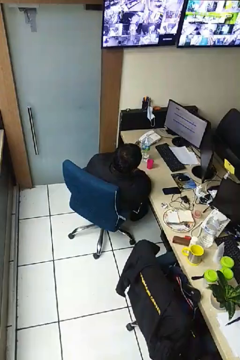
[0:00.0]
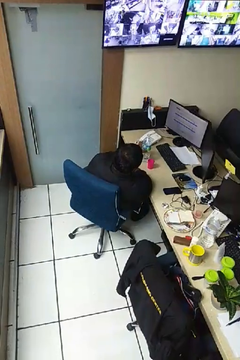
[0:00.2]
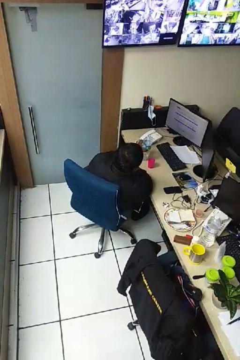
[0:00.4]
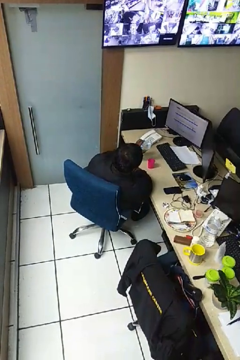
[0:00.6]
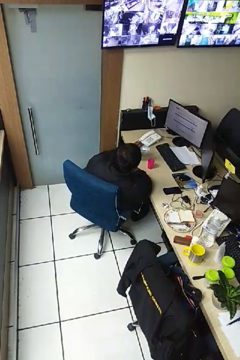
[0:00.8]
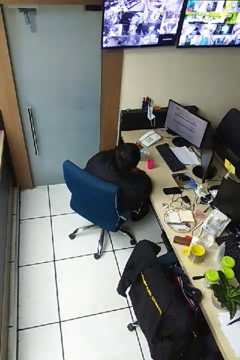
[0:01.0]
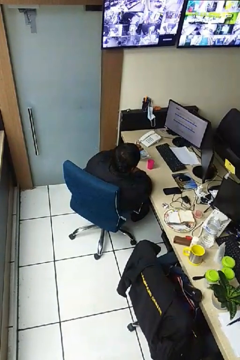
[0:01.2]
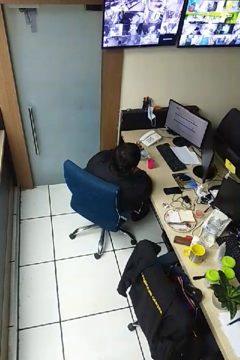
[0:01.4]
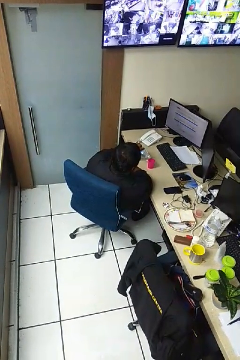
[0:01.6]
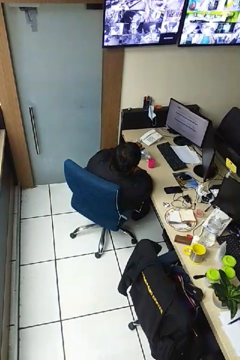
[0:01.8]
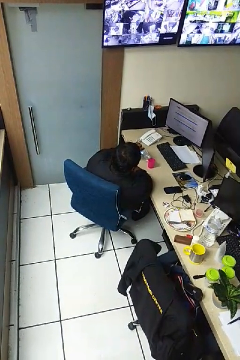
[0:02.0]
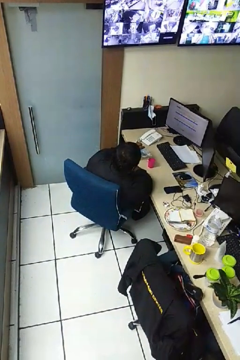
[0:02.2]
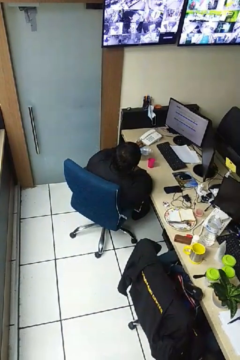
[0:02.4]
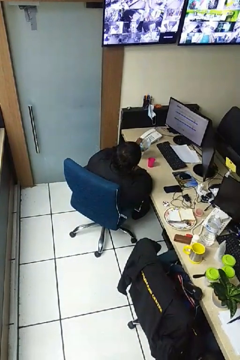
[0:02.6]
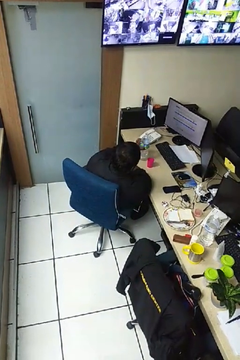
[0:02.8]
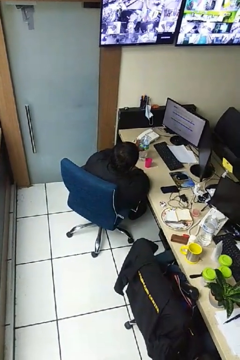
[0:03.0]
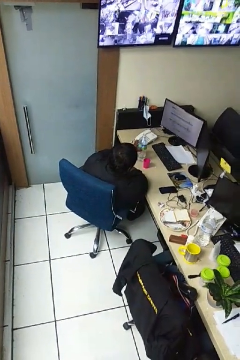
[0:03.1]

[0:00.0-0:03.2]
person pours liquid into cup

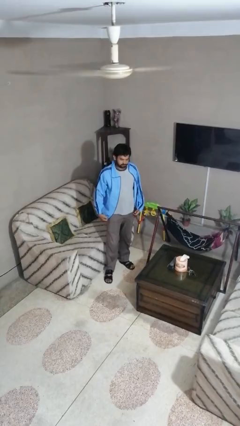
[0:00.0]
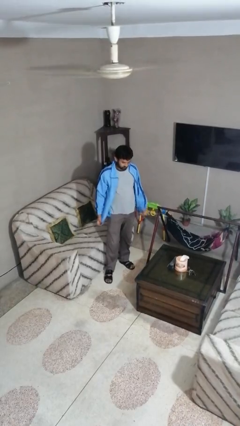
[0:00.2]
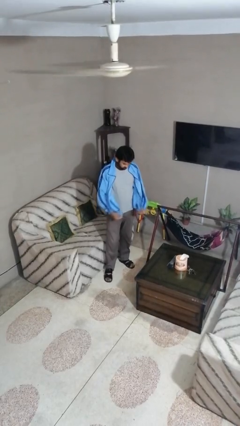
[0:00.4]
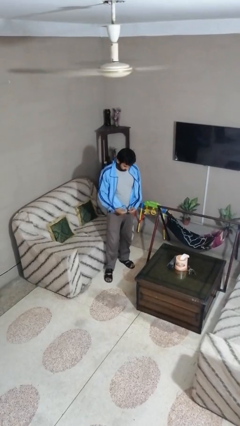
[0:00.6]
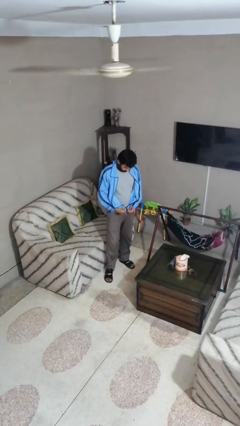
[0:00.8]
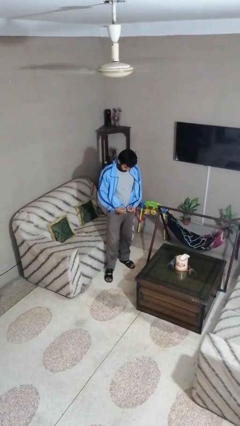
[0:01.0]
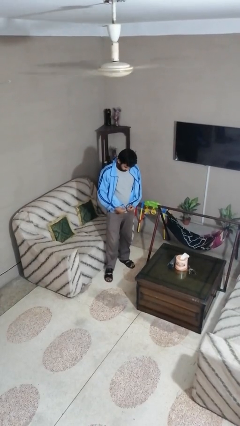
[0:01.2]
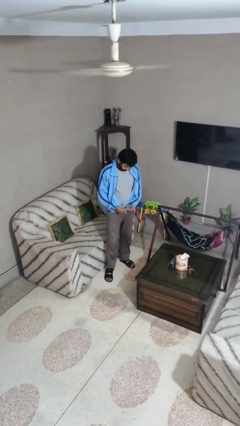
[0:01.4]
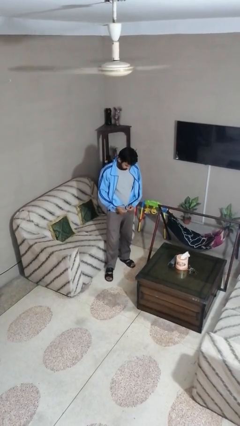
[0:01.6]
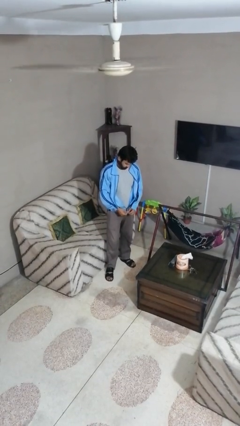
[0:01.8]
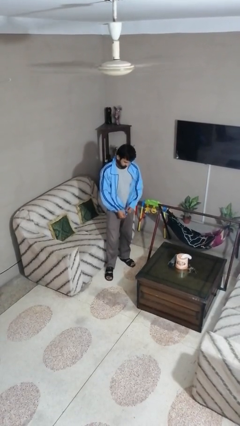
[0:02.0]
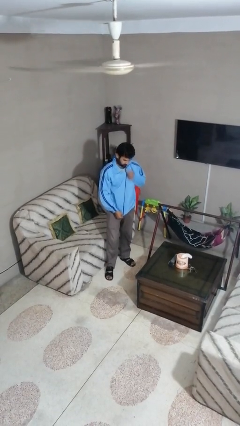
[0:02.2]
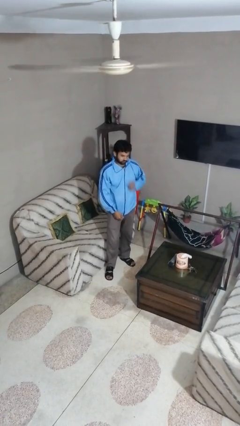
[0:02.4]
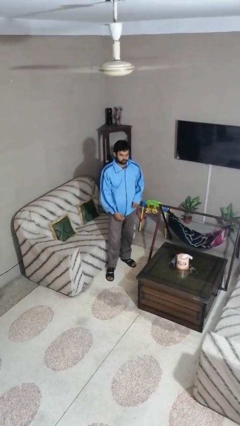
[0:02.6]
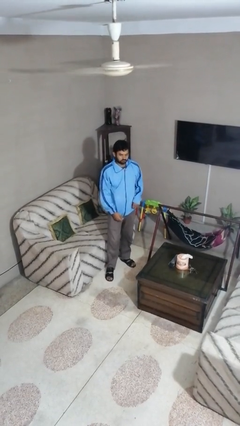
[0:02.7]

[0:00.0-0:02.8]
person zips up jacket

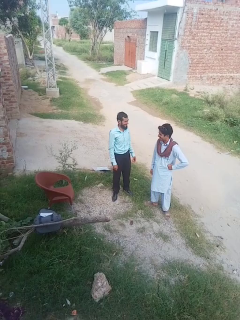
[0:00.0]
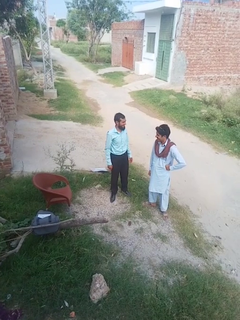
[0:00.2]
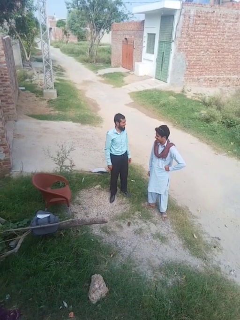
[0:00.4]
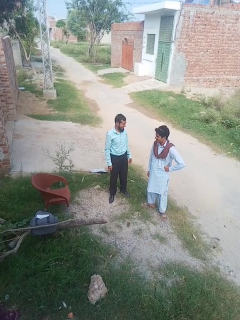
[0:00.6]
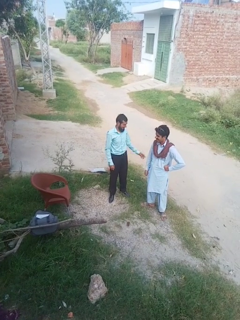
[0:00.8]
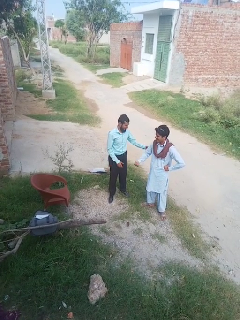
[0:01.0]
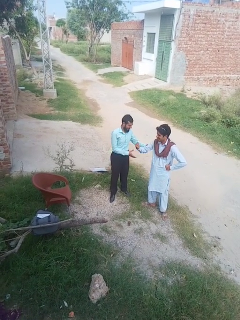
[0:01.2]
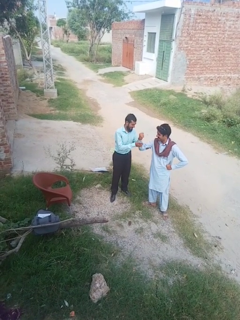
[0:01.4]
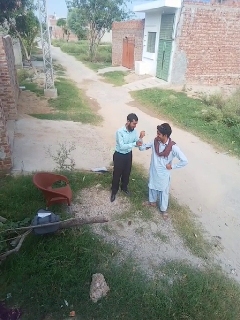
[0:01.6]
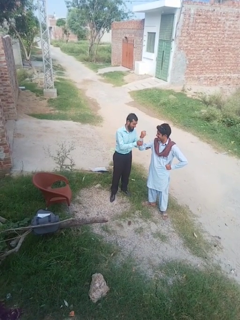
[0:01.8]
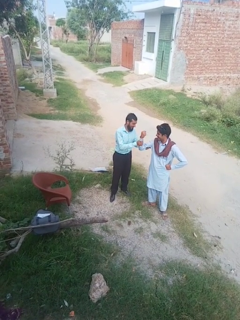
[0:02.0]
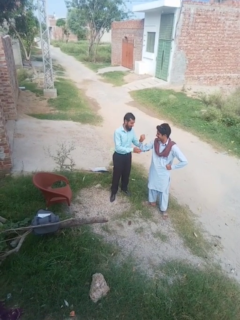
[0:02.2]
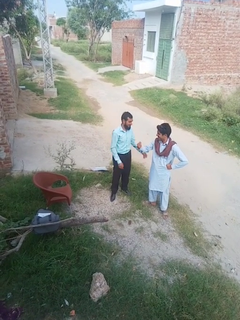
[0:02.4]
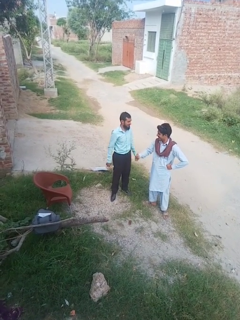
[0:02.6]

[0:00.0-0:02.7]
person grabs person by bicep

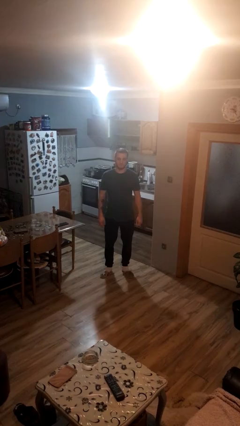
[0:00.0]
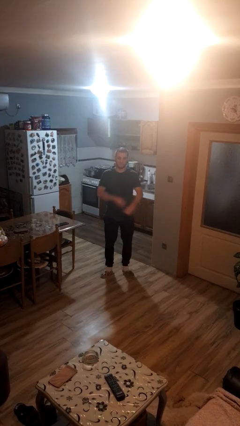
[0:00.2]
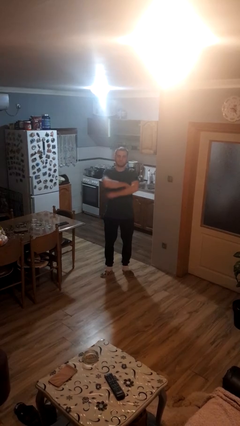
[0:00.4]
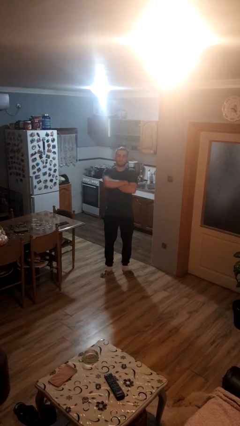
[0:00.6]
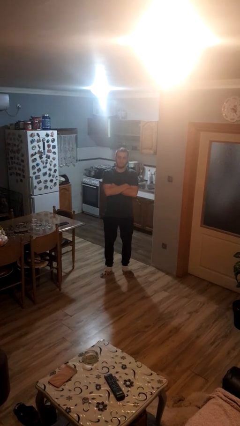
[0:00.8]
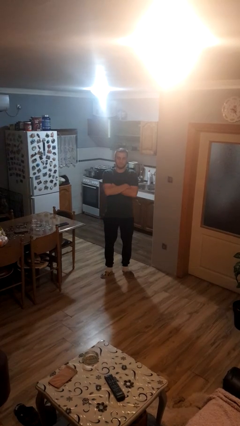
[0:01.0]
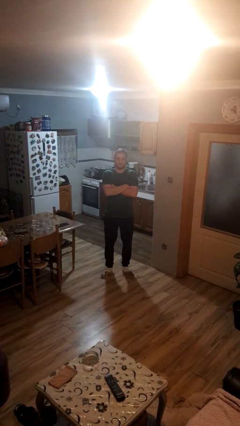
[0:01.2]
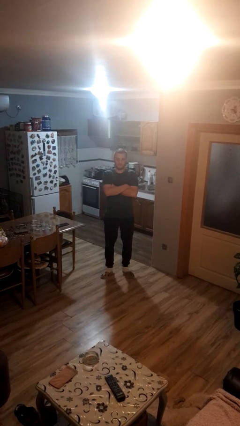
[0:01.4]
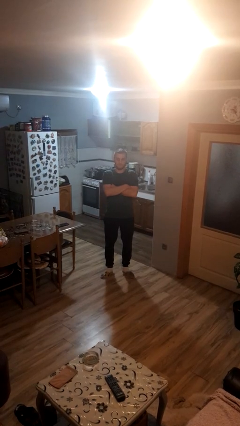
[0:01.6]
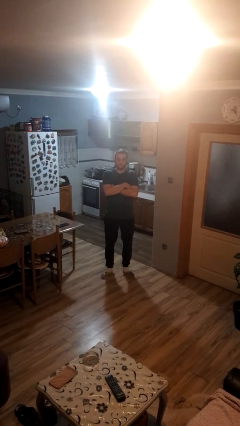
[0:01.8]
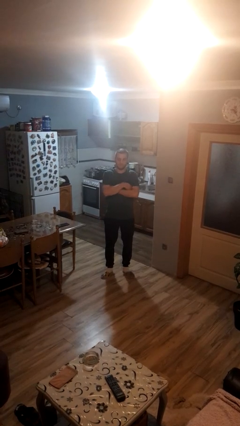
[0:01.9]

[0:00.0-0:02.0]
person crosses arms

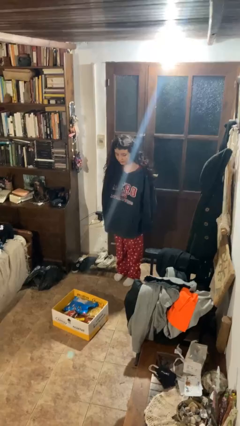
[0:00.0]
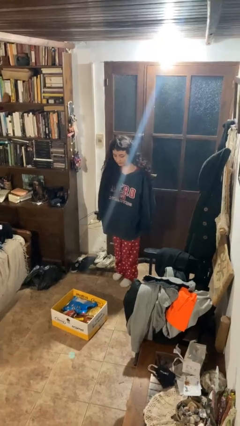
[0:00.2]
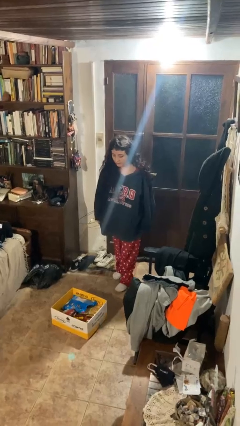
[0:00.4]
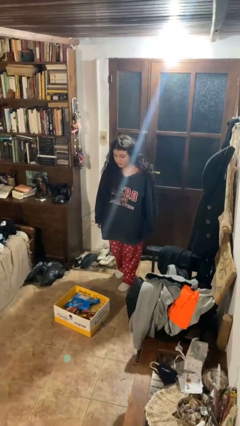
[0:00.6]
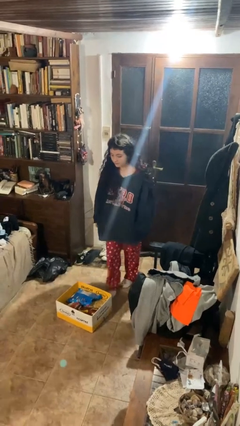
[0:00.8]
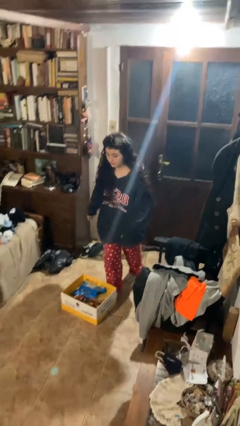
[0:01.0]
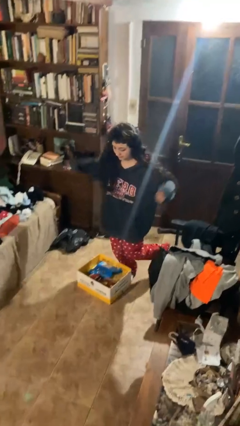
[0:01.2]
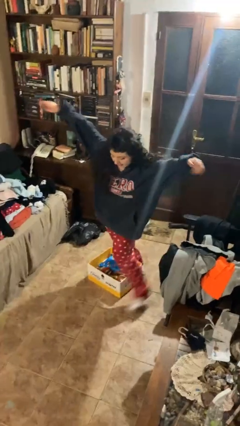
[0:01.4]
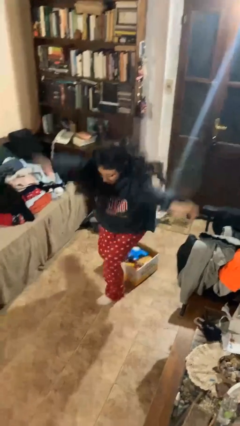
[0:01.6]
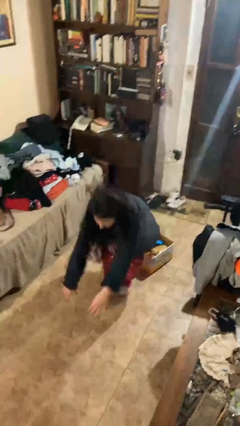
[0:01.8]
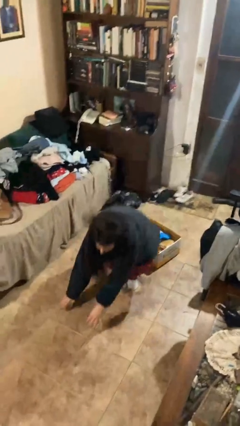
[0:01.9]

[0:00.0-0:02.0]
person trips on object on floor

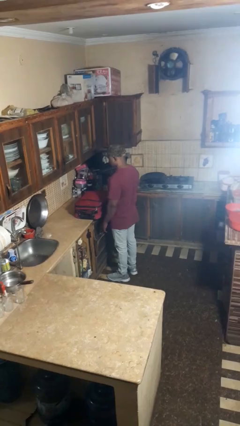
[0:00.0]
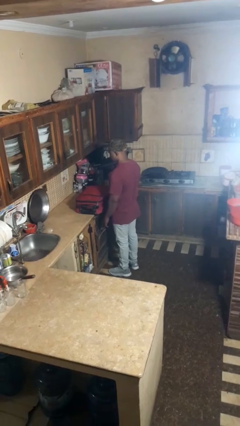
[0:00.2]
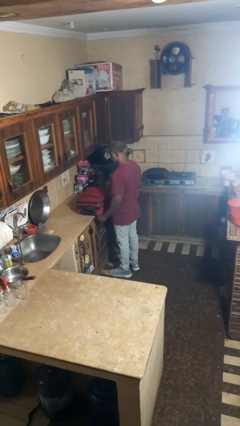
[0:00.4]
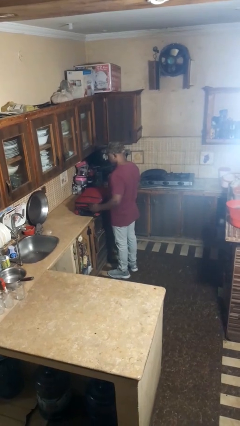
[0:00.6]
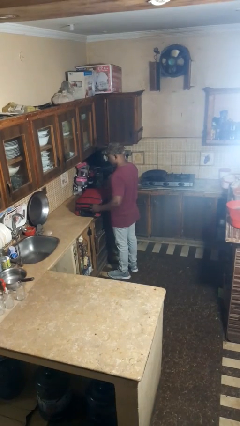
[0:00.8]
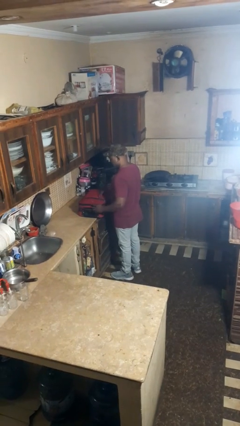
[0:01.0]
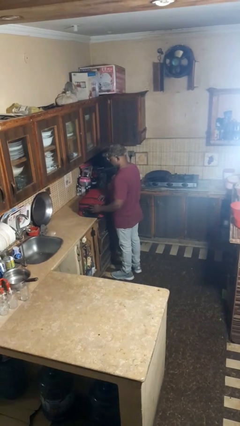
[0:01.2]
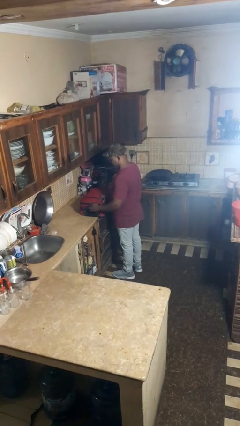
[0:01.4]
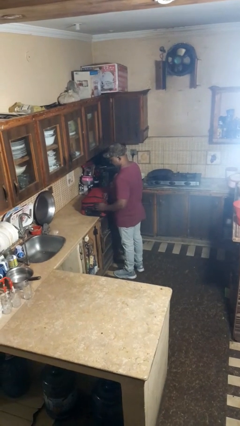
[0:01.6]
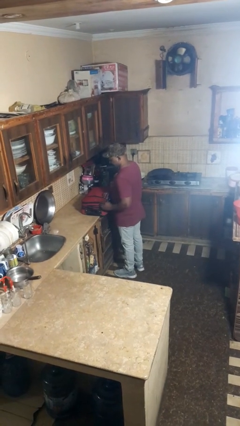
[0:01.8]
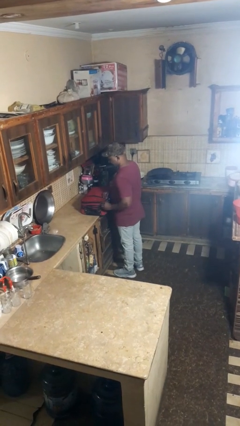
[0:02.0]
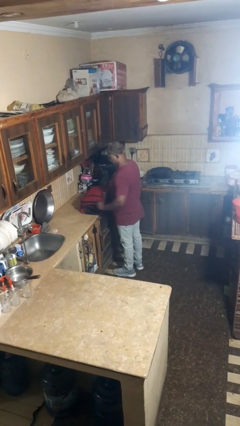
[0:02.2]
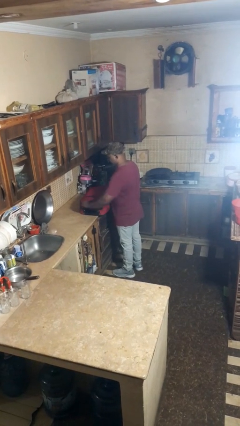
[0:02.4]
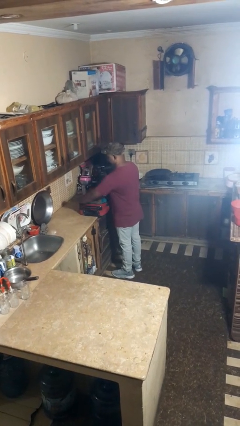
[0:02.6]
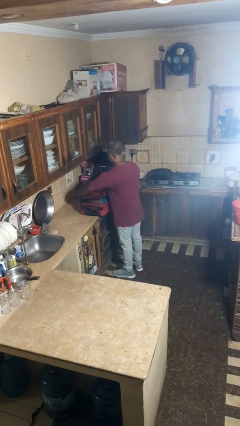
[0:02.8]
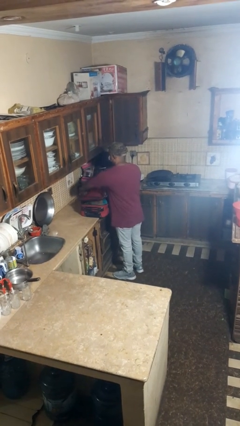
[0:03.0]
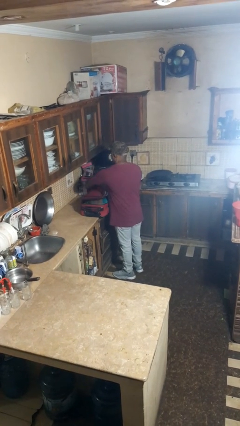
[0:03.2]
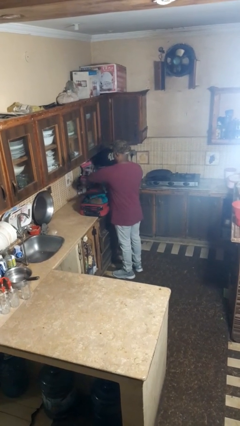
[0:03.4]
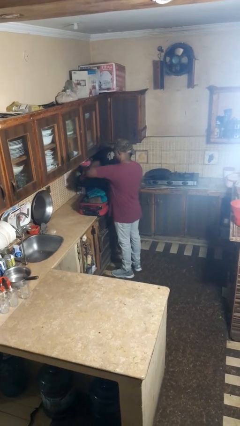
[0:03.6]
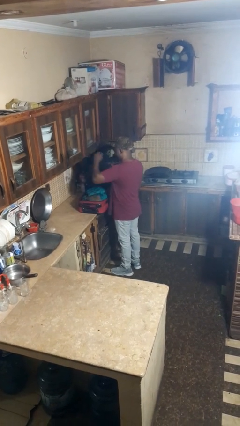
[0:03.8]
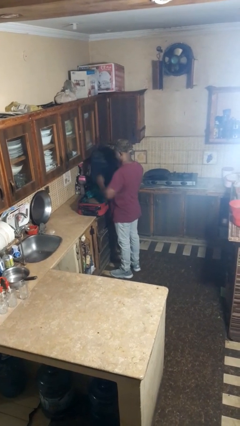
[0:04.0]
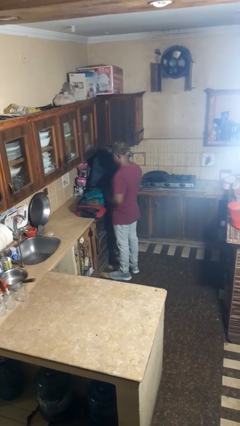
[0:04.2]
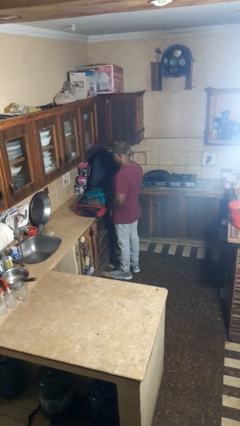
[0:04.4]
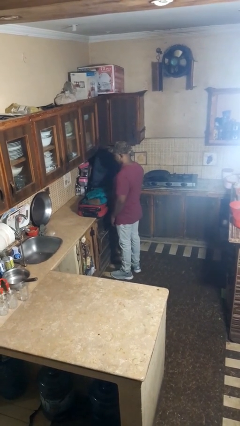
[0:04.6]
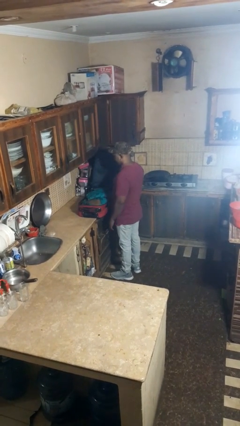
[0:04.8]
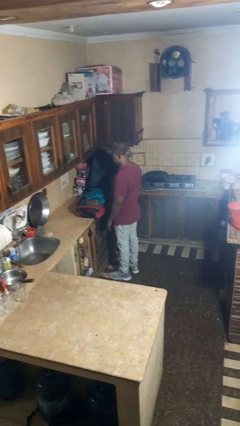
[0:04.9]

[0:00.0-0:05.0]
person opens suitcase

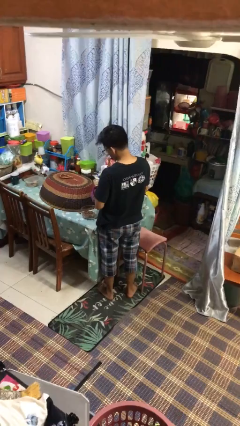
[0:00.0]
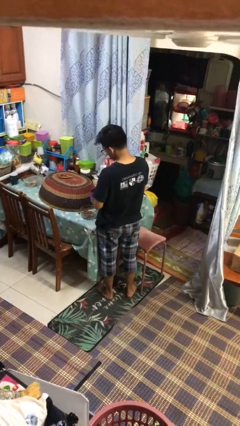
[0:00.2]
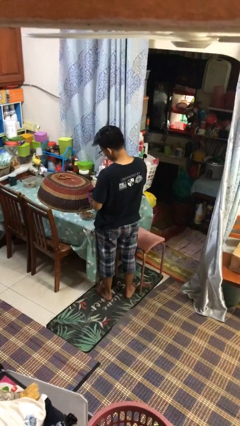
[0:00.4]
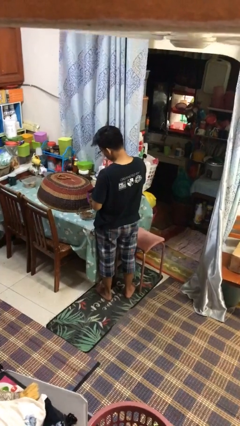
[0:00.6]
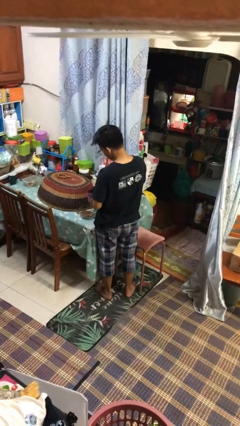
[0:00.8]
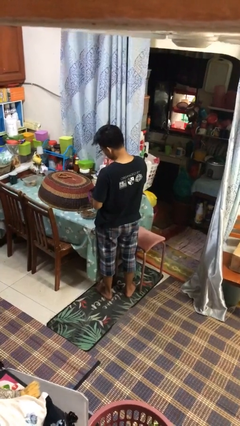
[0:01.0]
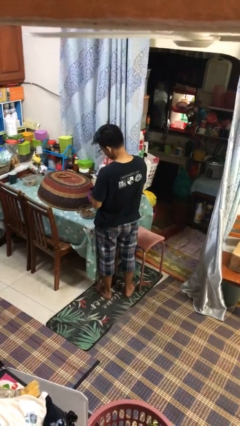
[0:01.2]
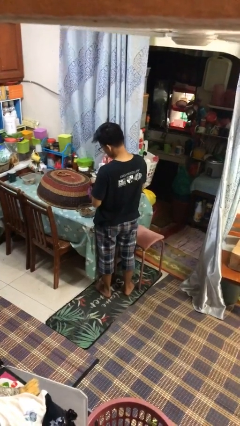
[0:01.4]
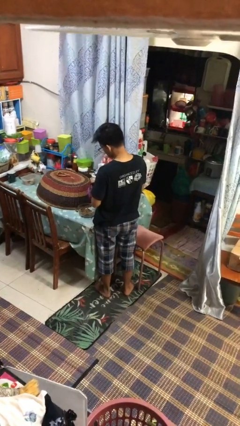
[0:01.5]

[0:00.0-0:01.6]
person pours into bowl
